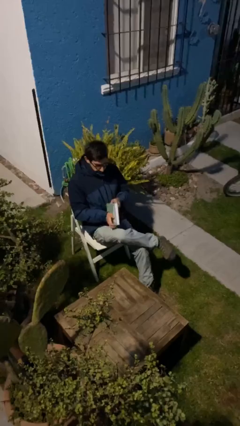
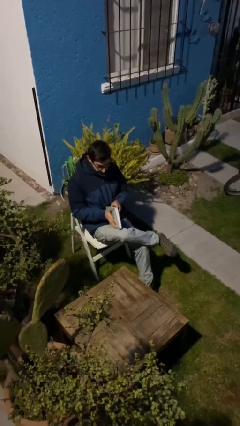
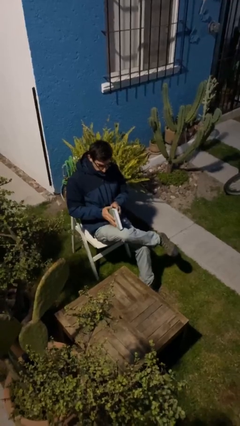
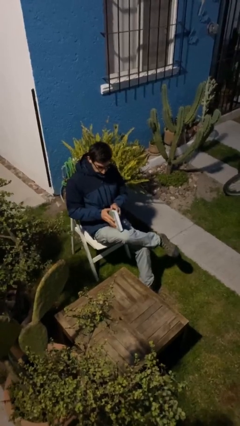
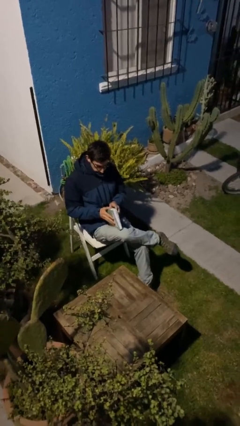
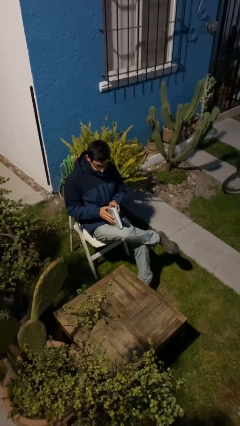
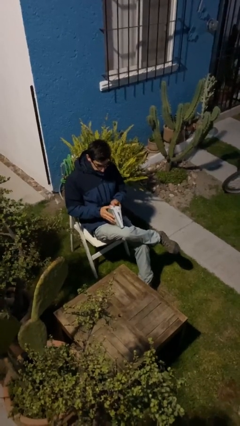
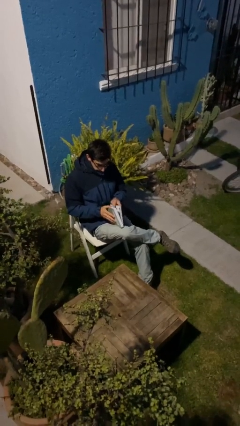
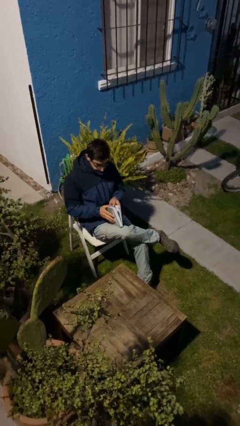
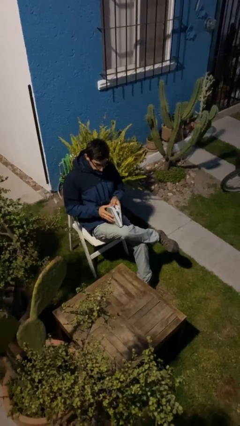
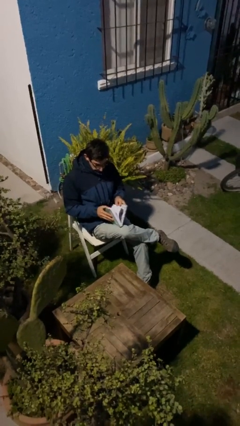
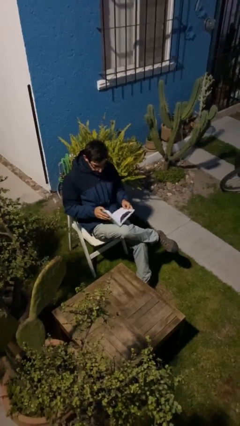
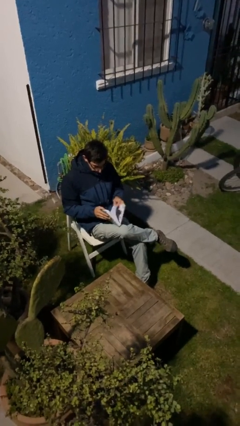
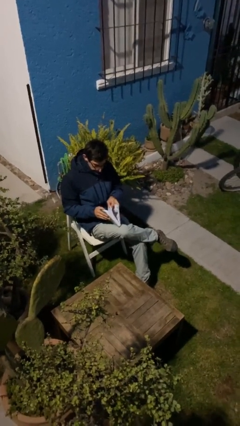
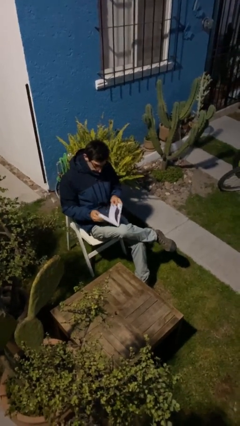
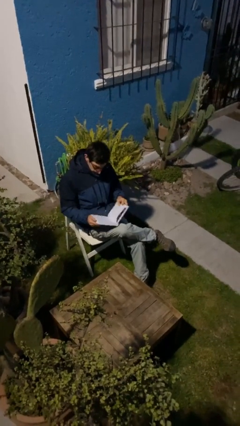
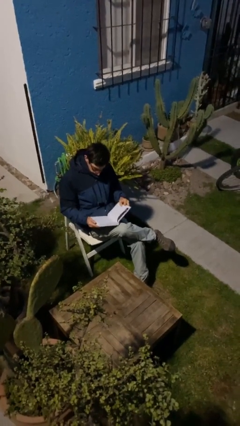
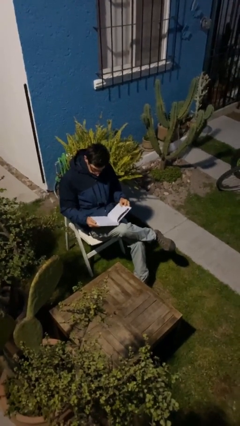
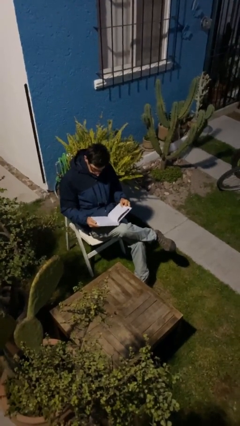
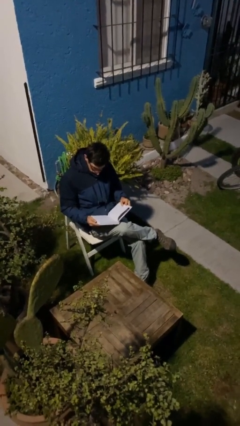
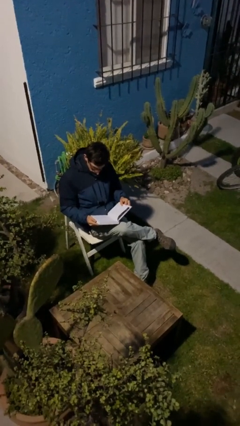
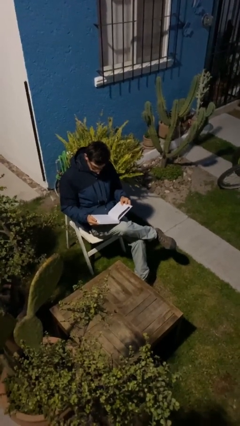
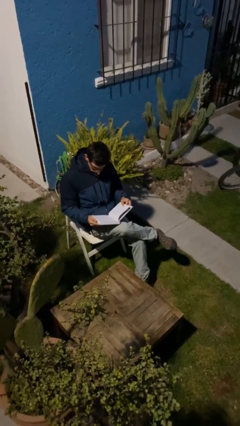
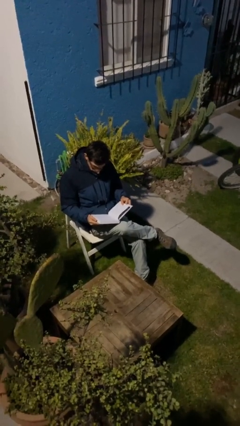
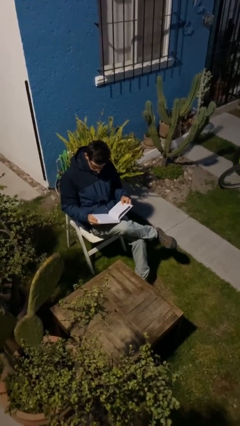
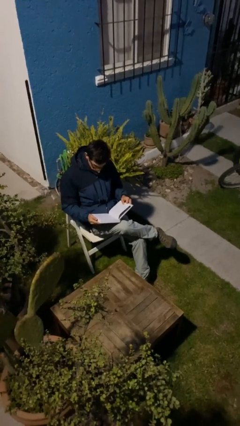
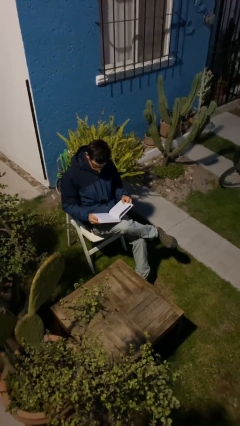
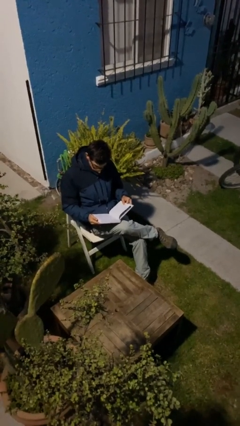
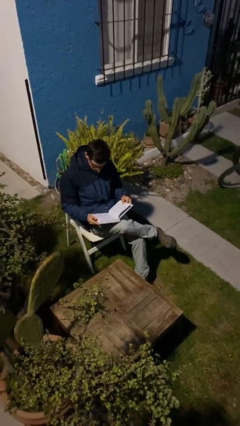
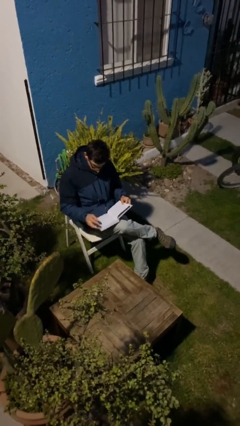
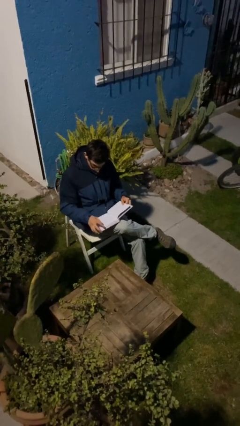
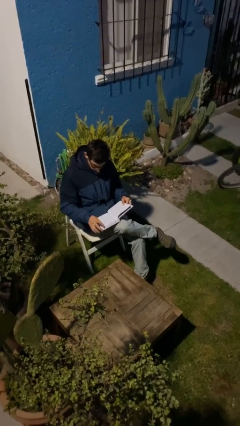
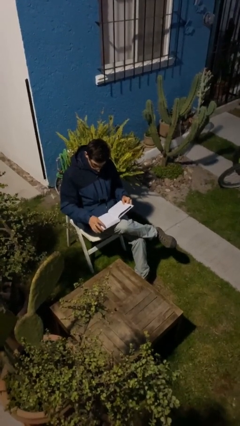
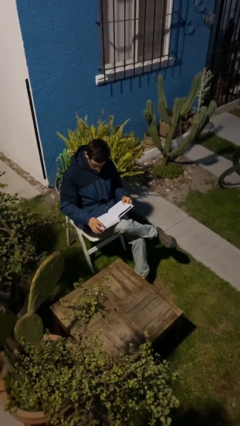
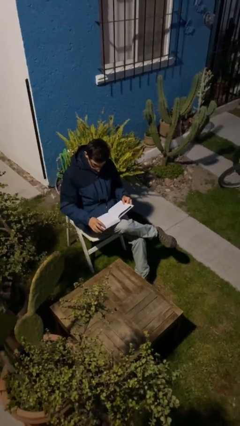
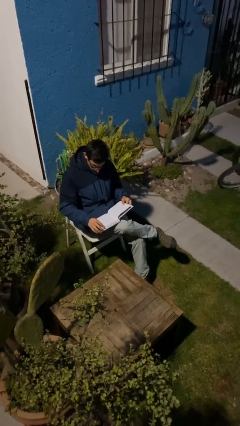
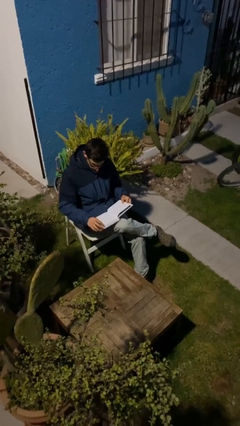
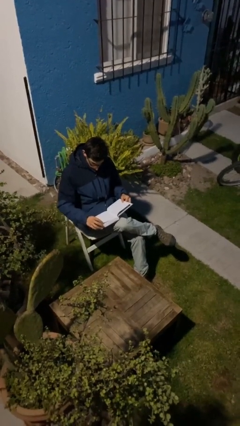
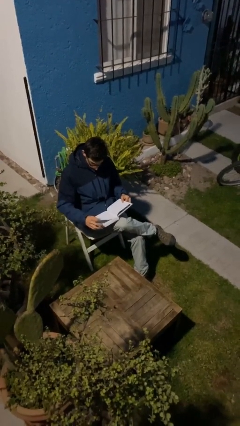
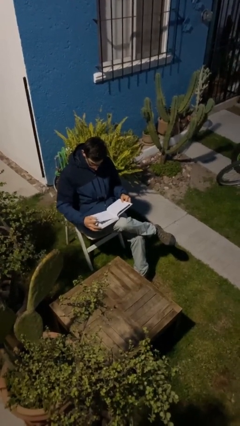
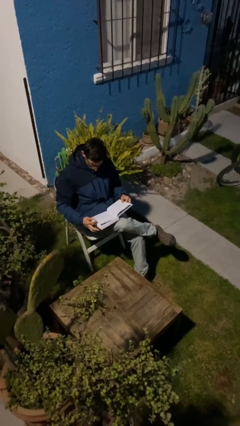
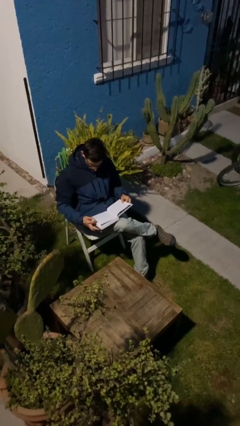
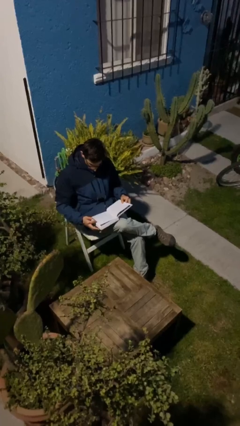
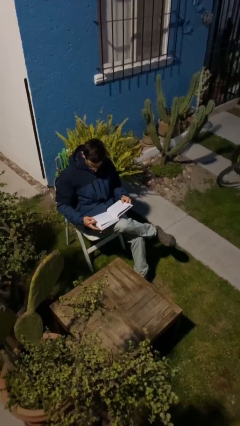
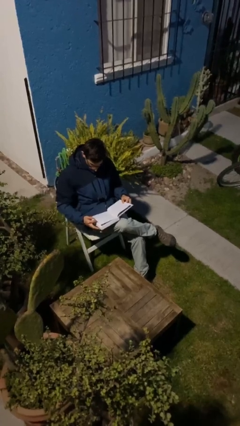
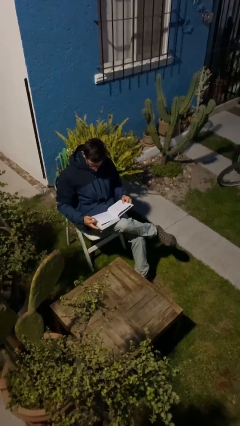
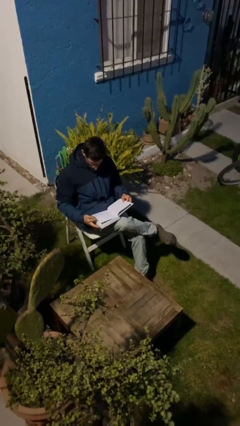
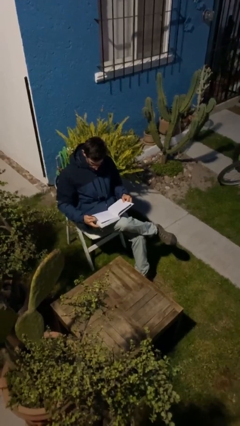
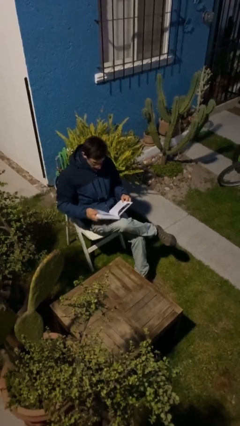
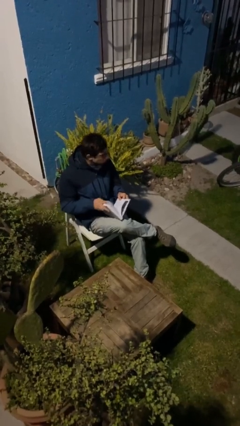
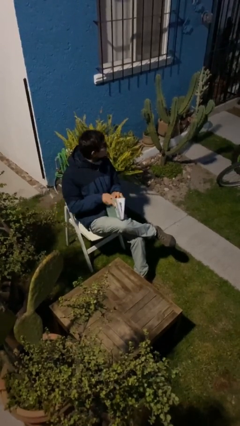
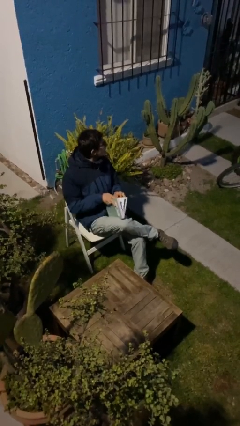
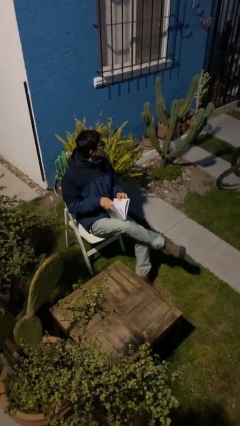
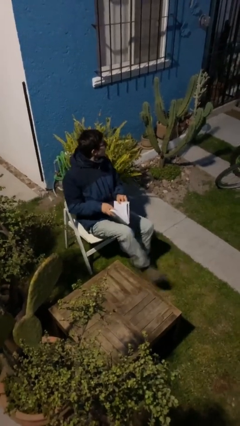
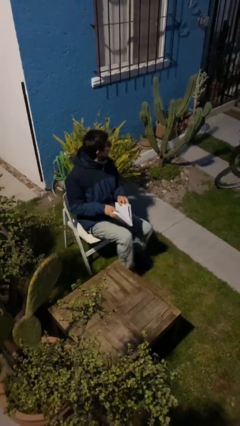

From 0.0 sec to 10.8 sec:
person reads document

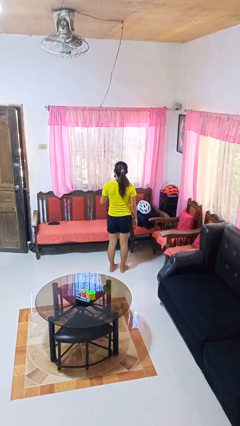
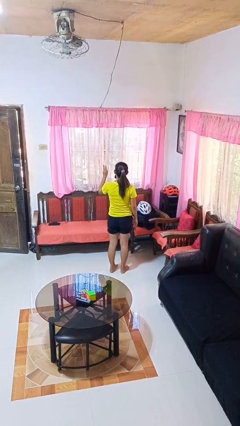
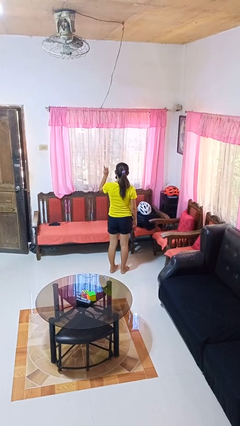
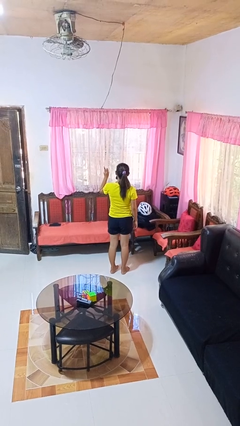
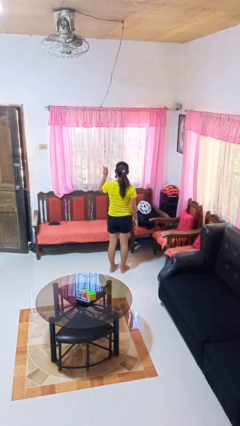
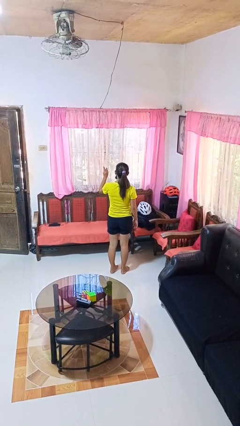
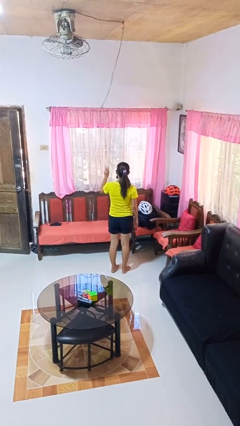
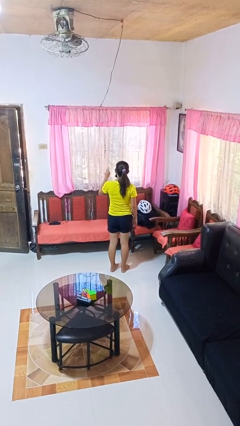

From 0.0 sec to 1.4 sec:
person gestures number three

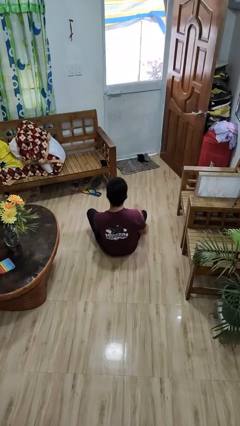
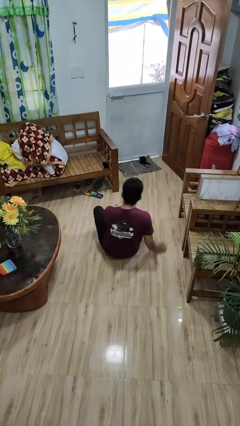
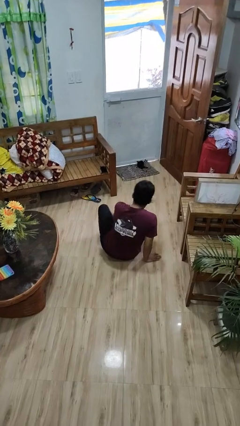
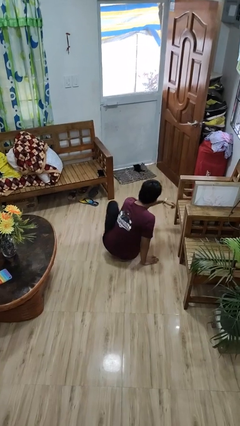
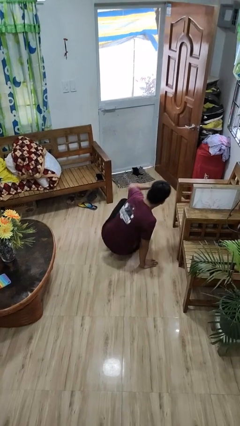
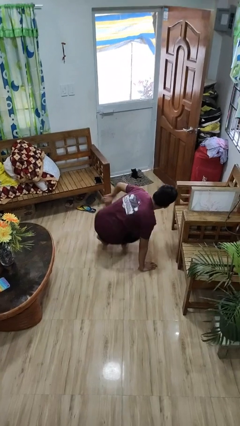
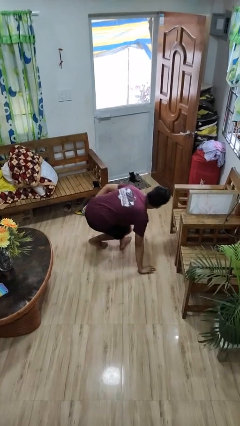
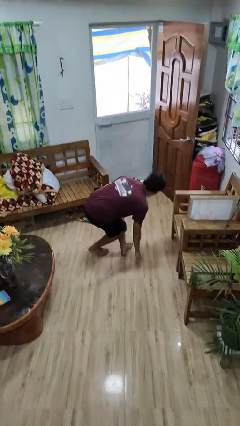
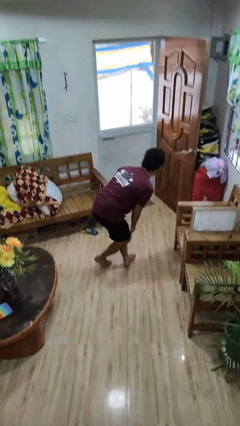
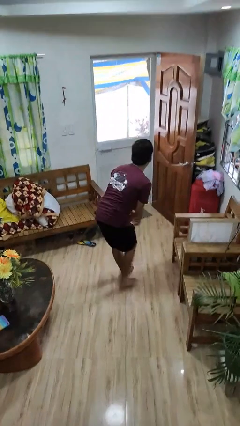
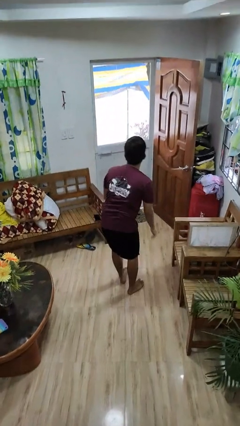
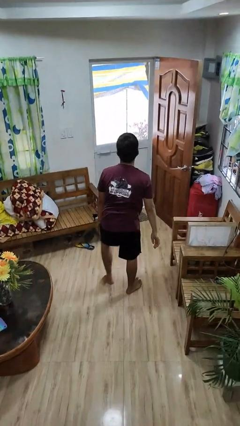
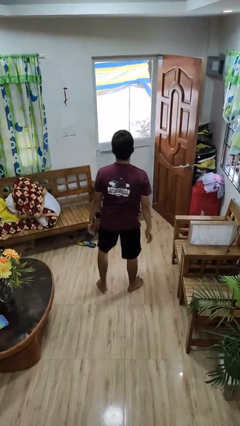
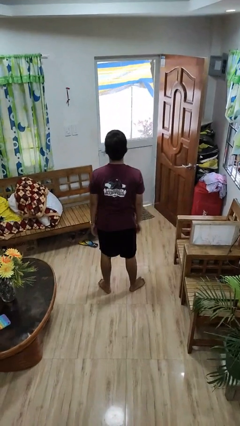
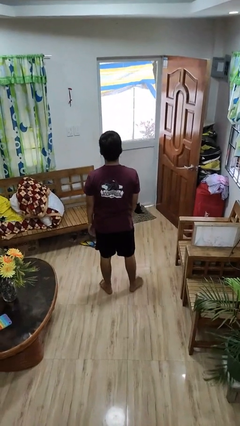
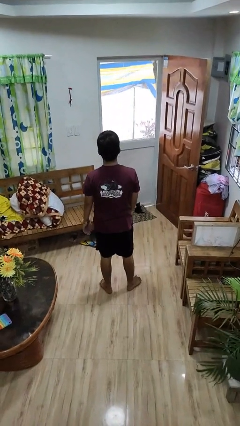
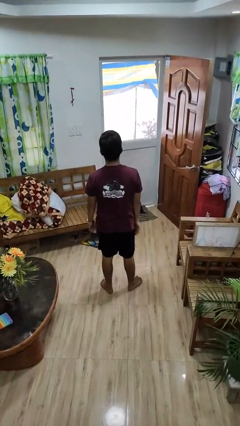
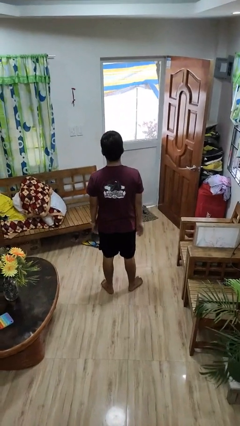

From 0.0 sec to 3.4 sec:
person stands up from floor

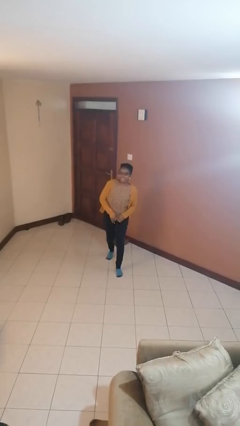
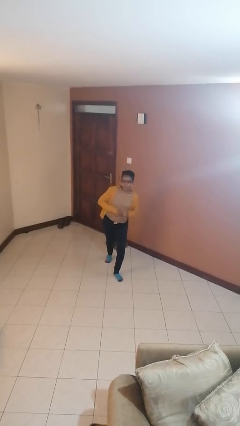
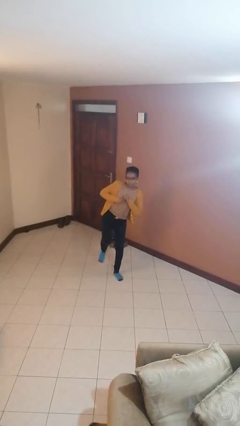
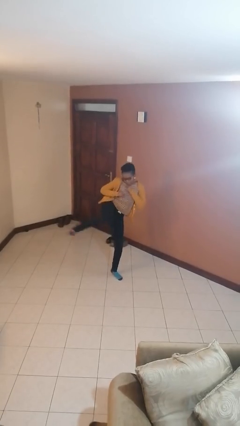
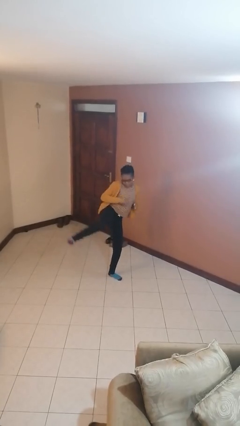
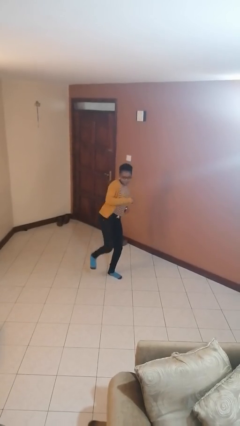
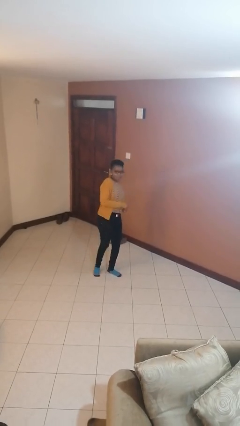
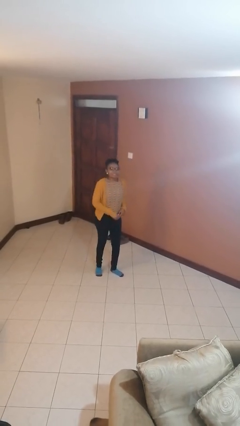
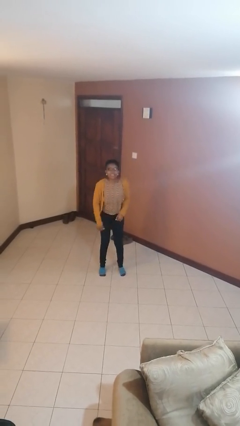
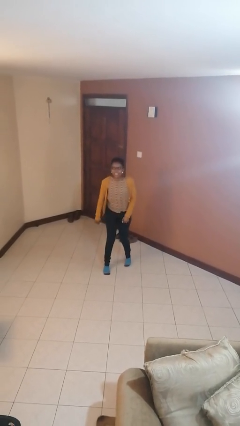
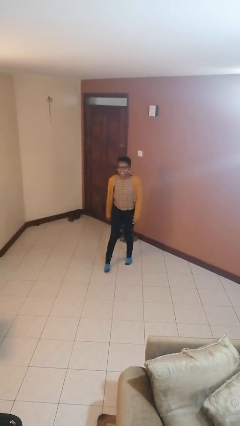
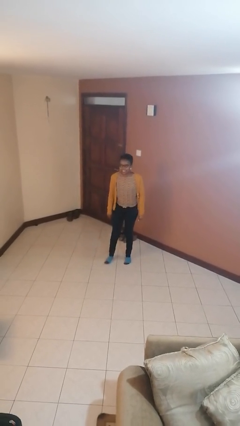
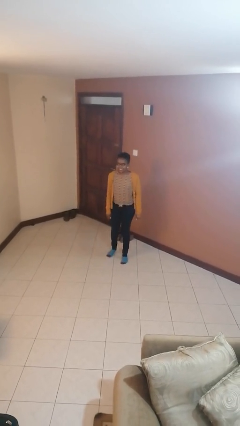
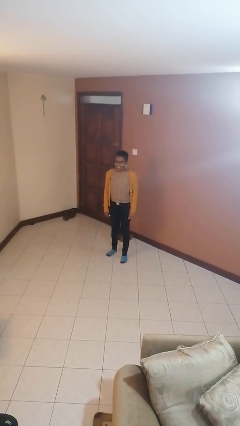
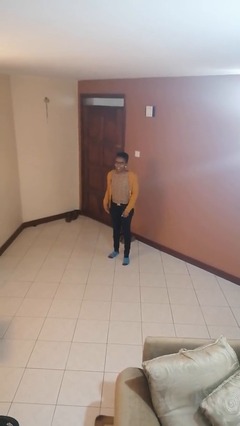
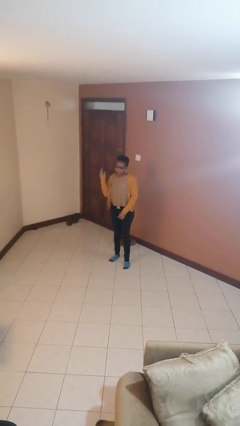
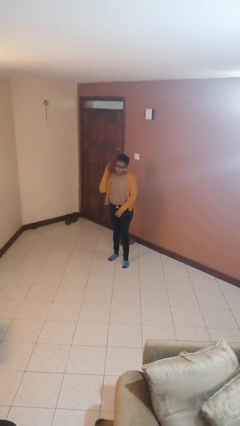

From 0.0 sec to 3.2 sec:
person karate kicks
